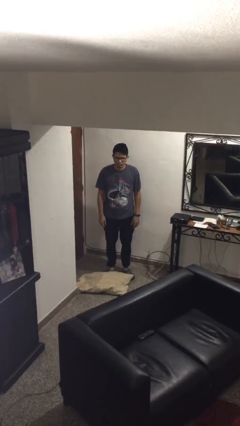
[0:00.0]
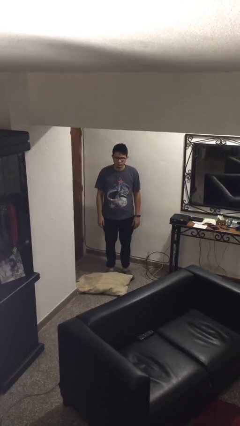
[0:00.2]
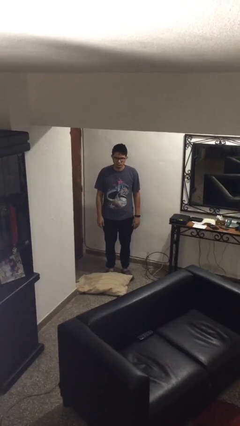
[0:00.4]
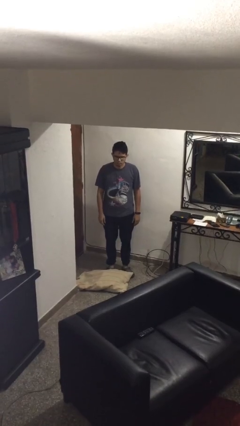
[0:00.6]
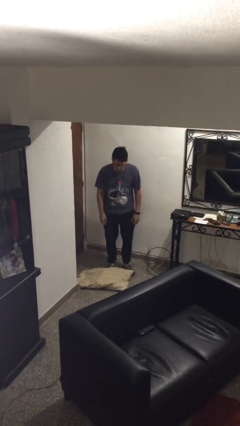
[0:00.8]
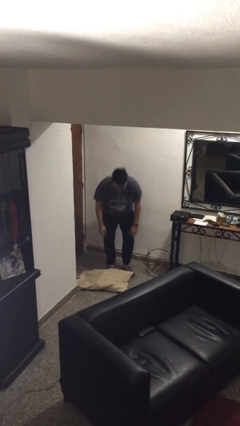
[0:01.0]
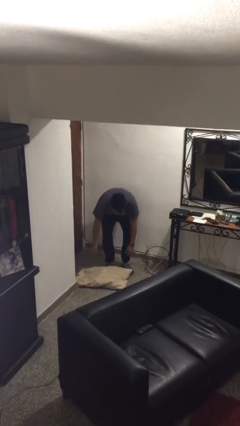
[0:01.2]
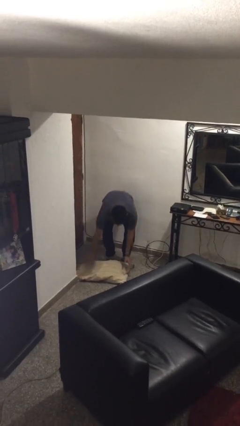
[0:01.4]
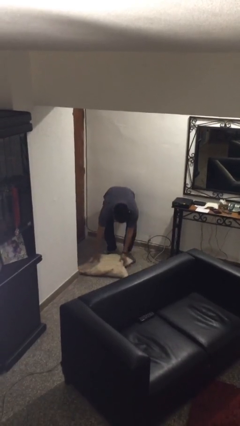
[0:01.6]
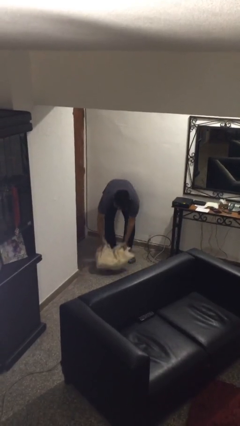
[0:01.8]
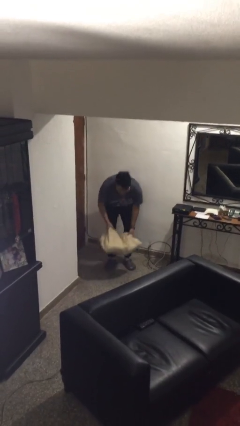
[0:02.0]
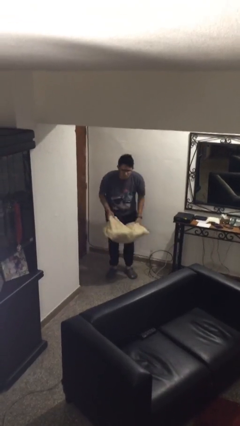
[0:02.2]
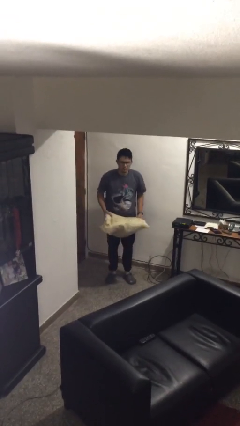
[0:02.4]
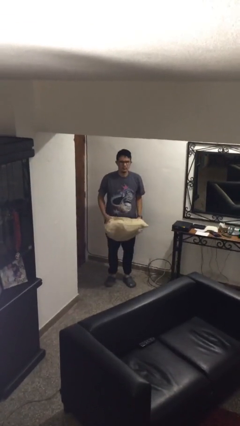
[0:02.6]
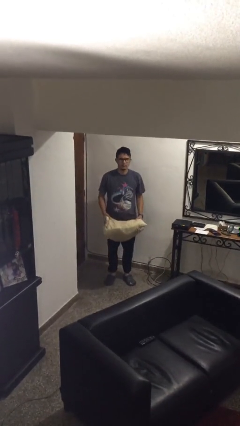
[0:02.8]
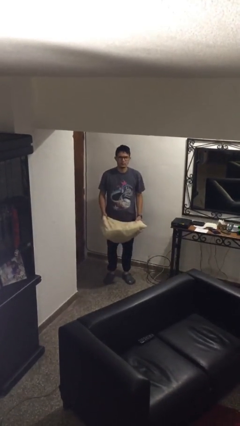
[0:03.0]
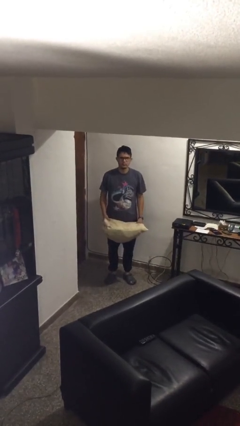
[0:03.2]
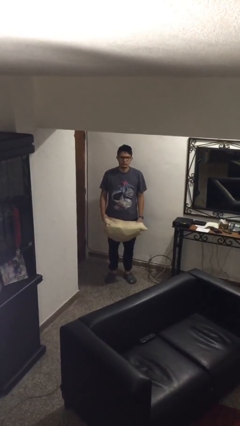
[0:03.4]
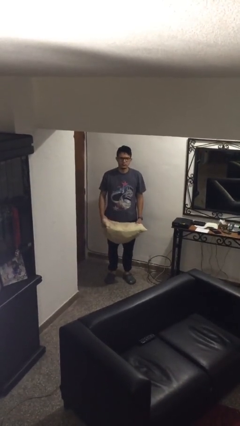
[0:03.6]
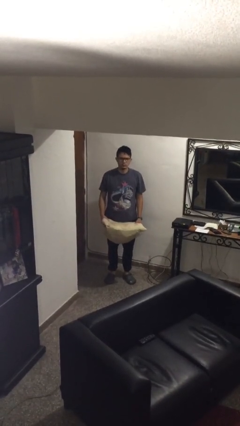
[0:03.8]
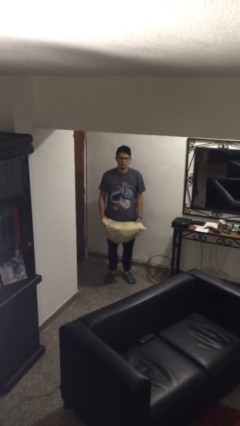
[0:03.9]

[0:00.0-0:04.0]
person picks up object from floor

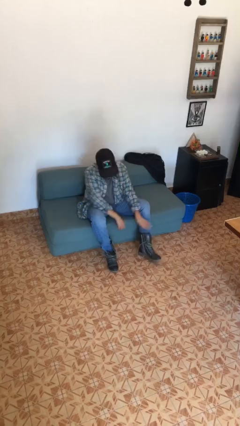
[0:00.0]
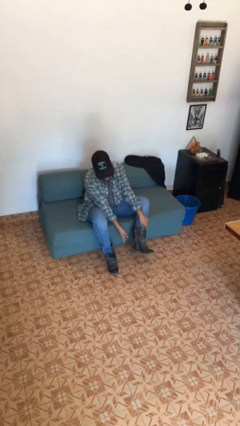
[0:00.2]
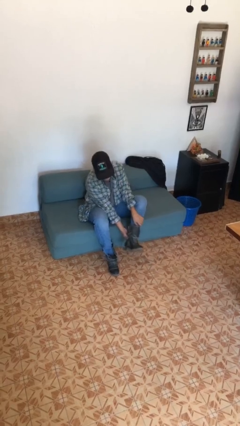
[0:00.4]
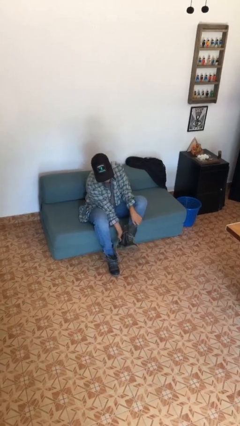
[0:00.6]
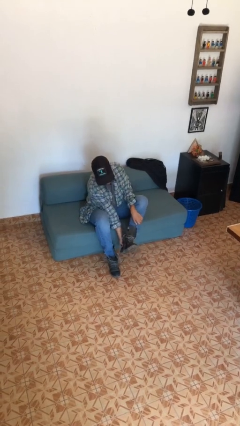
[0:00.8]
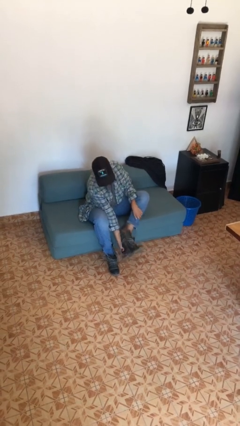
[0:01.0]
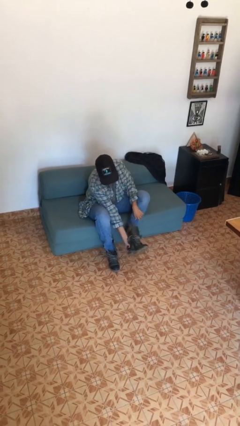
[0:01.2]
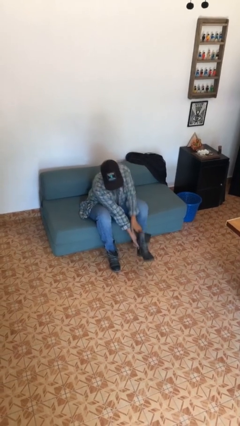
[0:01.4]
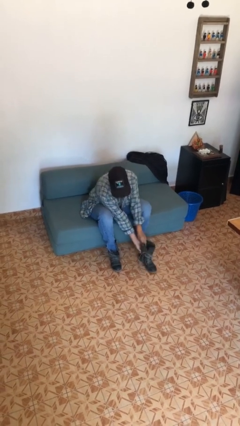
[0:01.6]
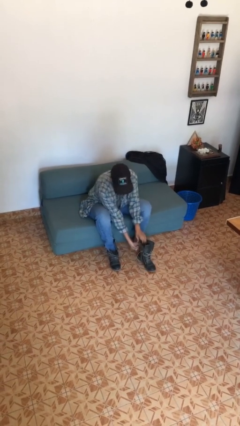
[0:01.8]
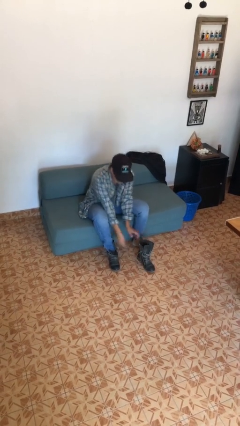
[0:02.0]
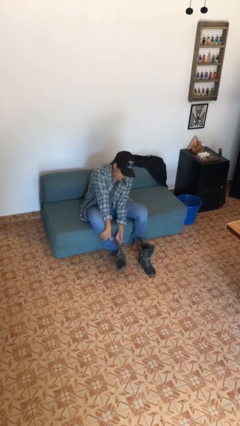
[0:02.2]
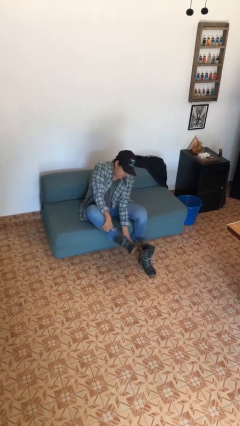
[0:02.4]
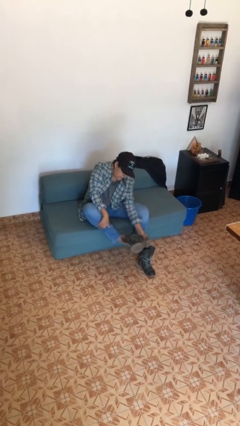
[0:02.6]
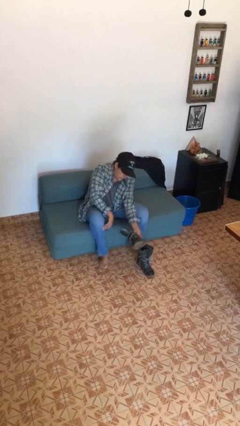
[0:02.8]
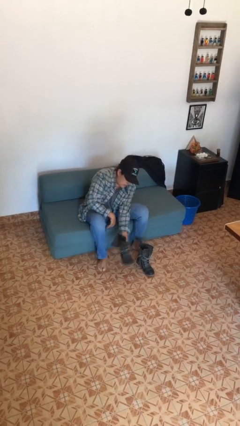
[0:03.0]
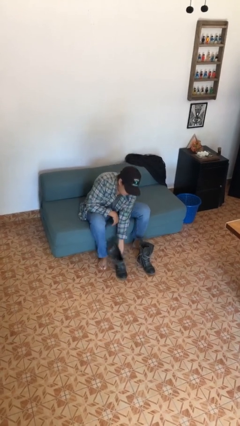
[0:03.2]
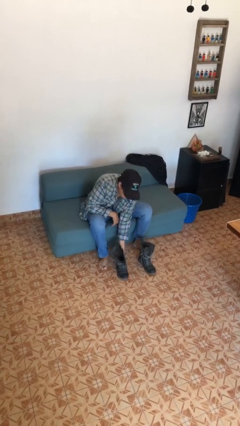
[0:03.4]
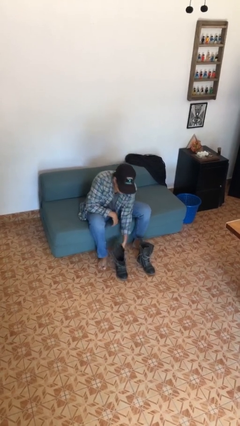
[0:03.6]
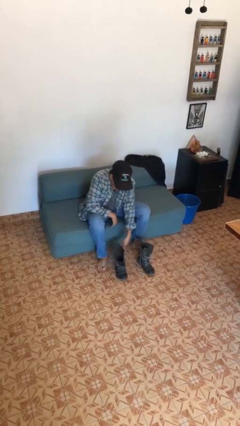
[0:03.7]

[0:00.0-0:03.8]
person takes off boots

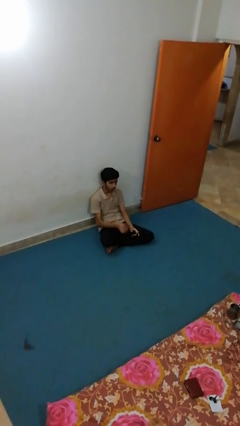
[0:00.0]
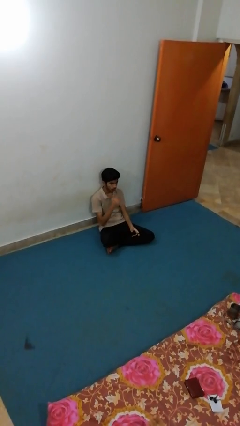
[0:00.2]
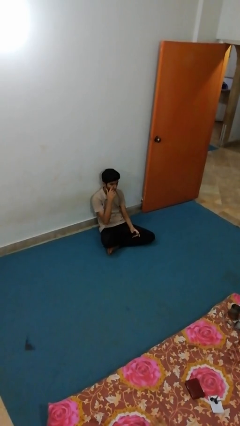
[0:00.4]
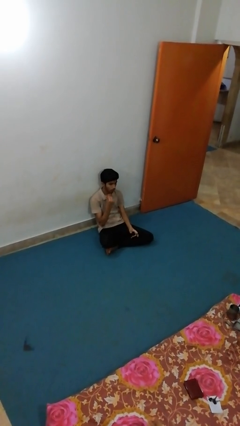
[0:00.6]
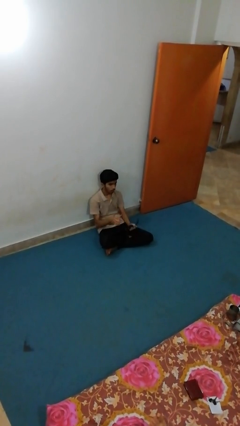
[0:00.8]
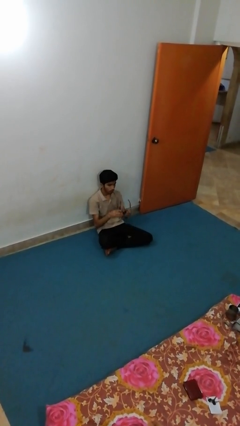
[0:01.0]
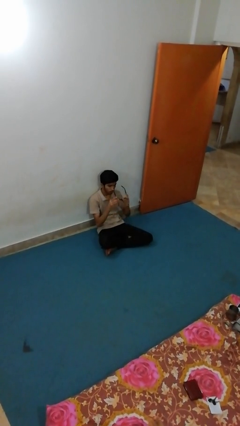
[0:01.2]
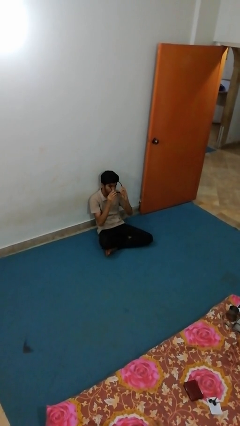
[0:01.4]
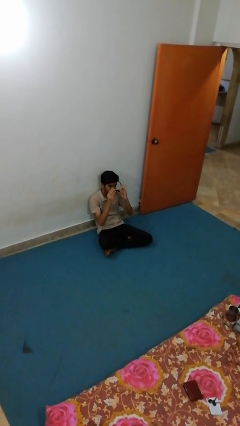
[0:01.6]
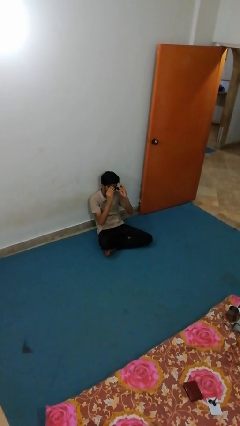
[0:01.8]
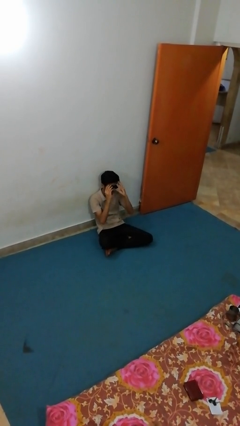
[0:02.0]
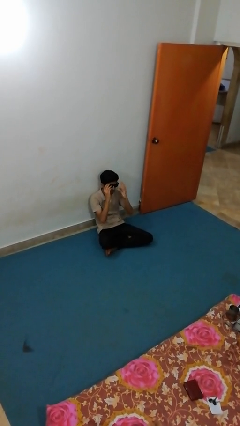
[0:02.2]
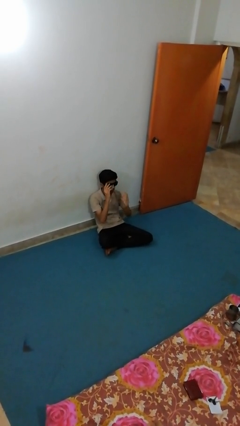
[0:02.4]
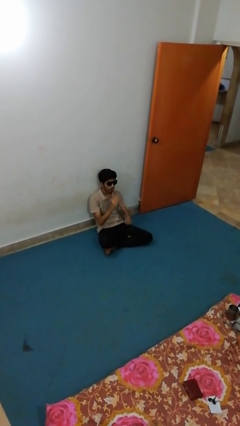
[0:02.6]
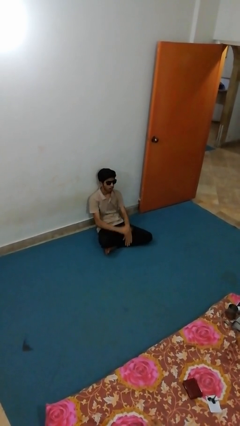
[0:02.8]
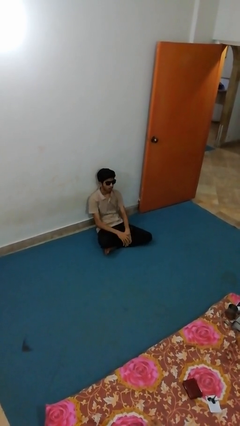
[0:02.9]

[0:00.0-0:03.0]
person puts on sunglasses

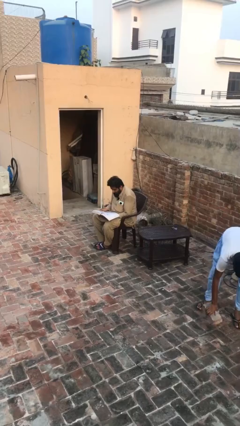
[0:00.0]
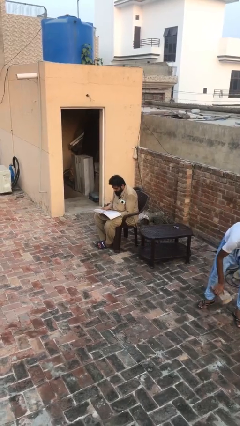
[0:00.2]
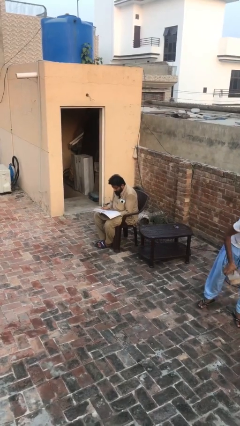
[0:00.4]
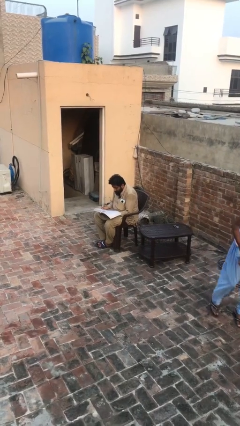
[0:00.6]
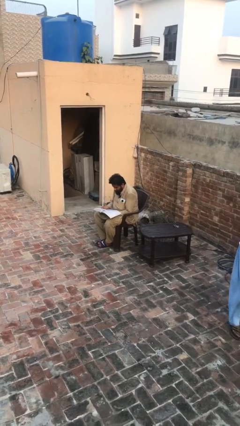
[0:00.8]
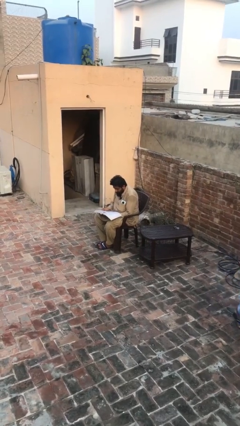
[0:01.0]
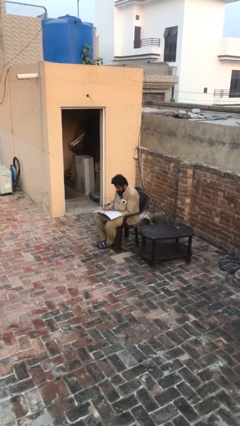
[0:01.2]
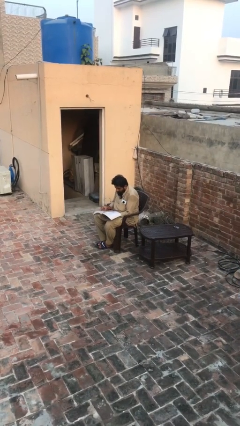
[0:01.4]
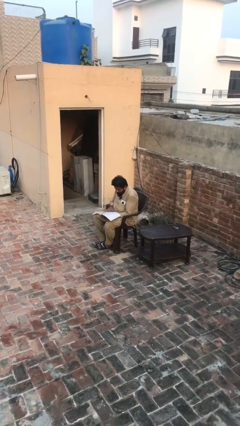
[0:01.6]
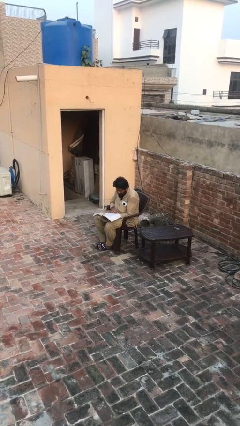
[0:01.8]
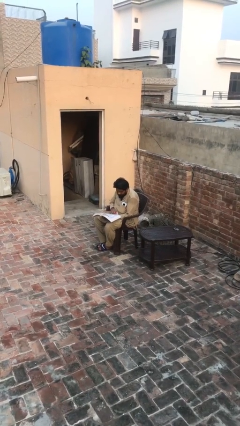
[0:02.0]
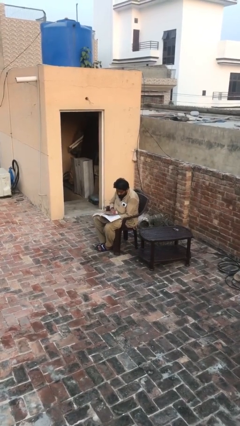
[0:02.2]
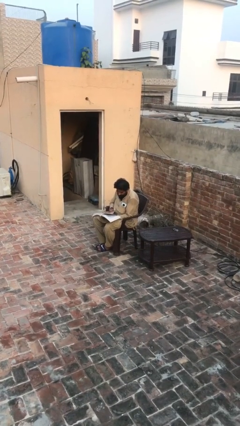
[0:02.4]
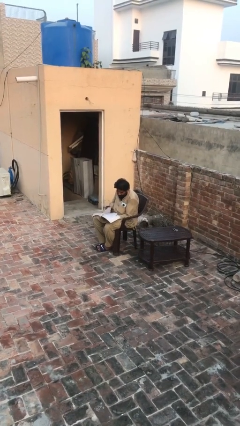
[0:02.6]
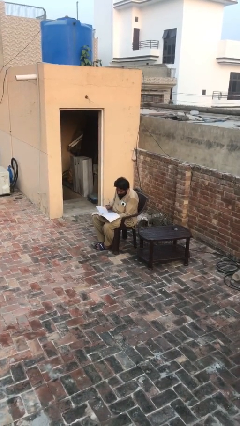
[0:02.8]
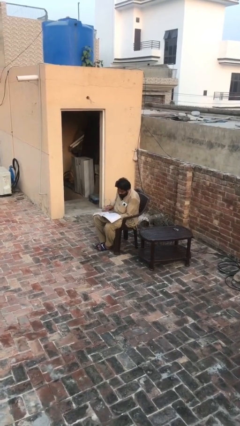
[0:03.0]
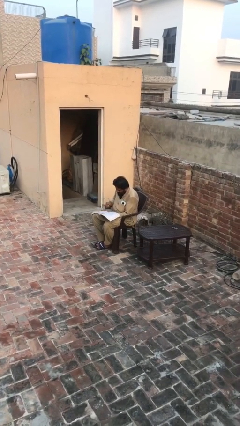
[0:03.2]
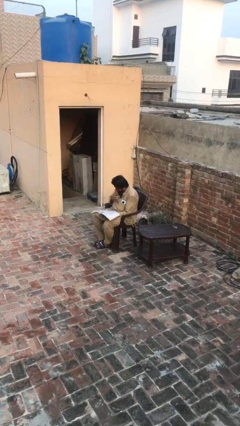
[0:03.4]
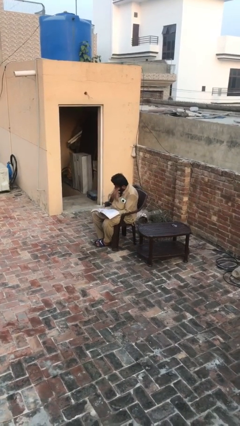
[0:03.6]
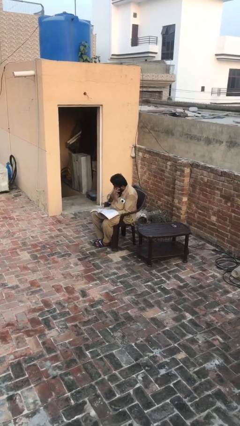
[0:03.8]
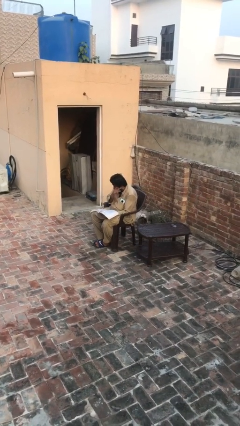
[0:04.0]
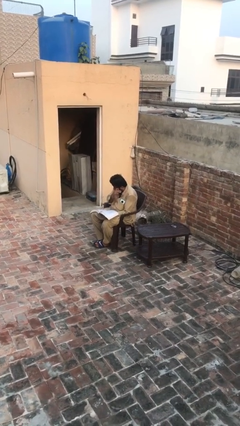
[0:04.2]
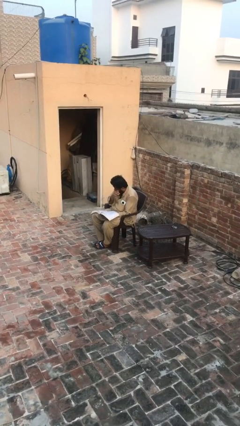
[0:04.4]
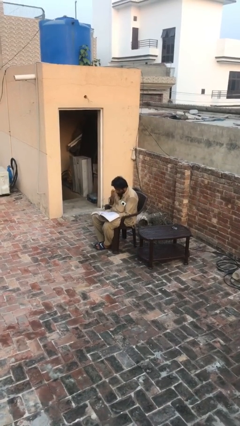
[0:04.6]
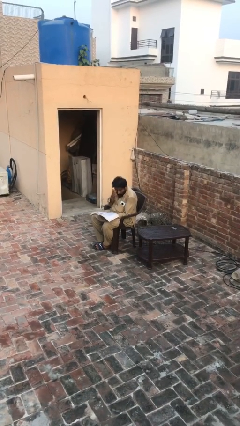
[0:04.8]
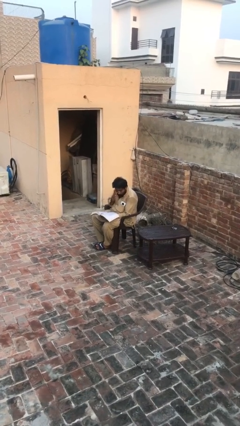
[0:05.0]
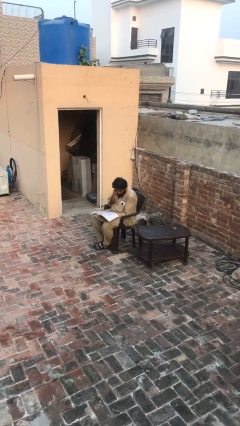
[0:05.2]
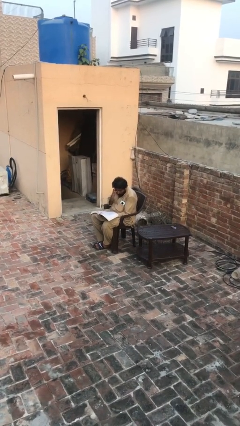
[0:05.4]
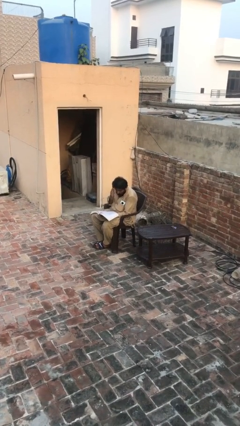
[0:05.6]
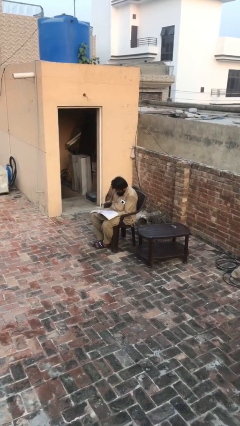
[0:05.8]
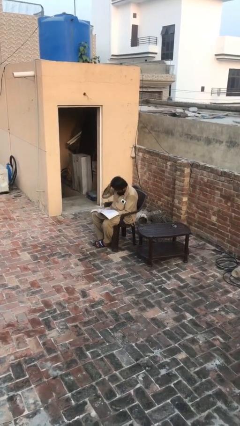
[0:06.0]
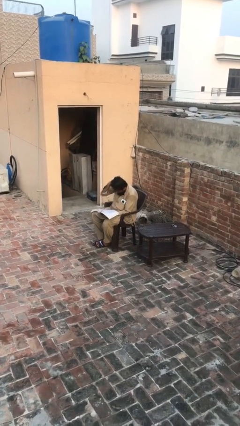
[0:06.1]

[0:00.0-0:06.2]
person reads document

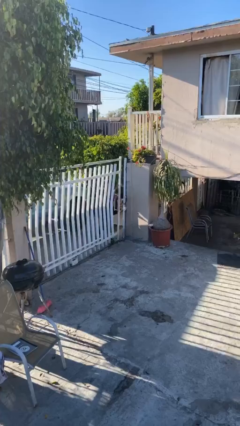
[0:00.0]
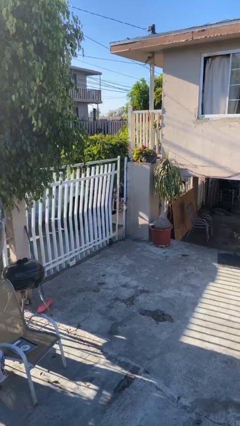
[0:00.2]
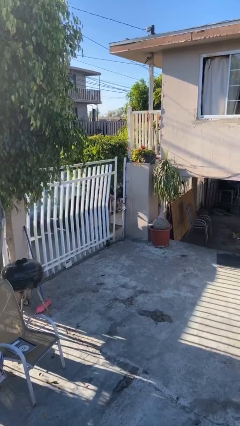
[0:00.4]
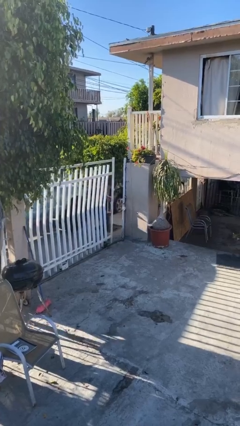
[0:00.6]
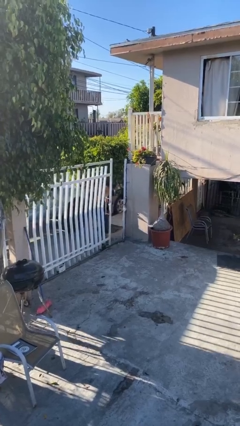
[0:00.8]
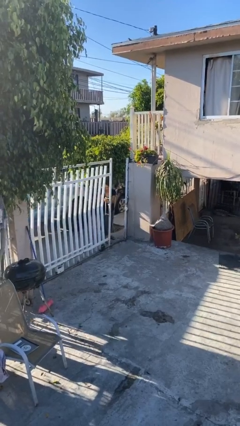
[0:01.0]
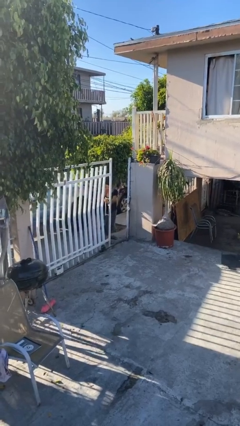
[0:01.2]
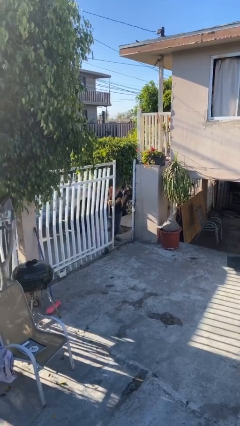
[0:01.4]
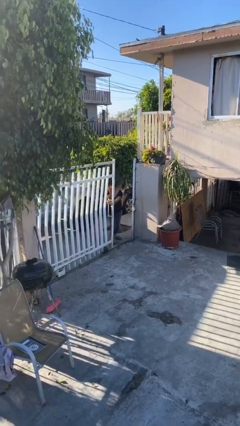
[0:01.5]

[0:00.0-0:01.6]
person opens facility door
